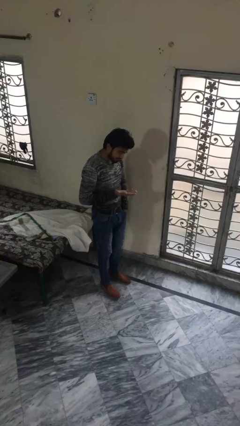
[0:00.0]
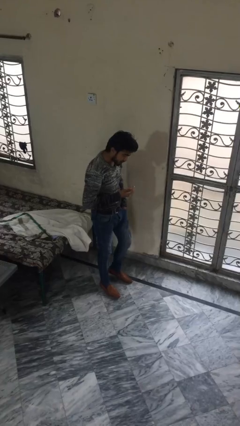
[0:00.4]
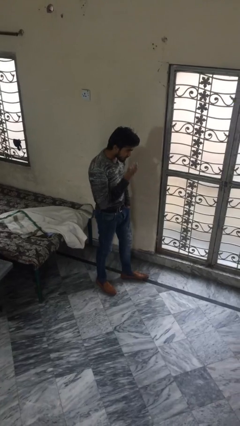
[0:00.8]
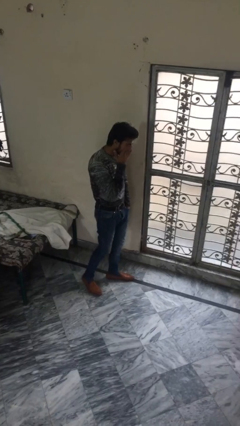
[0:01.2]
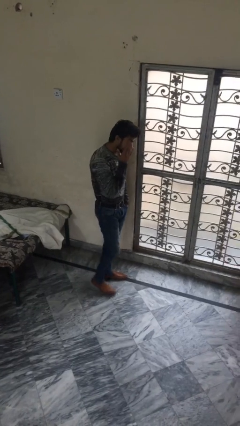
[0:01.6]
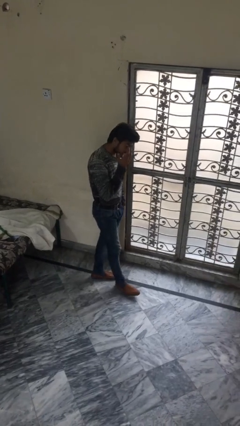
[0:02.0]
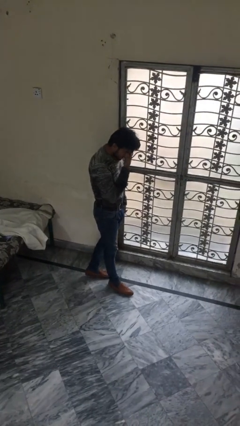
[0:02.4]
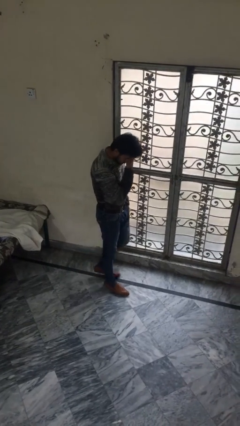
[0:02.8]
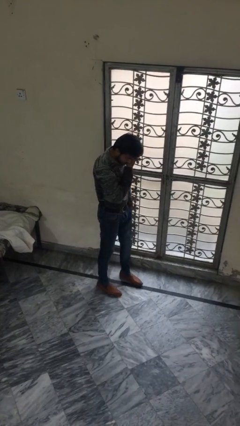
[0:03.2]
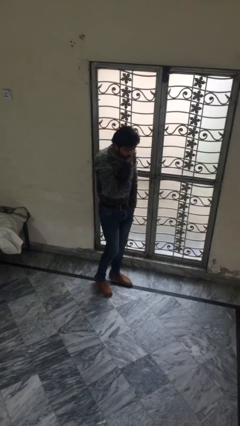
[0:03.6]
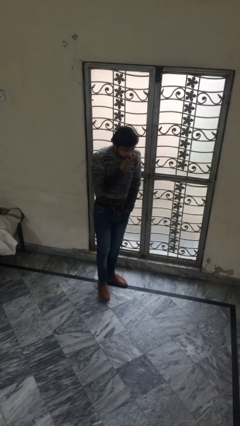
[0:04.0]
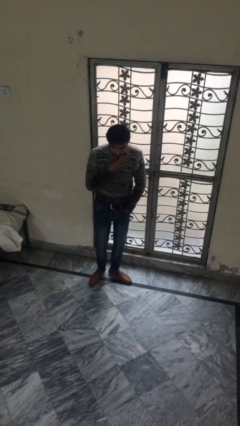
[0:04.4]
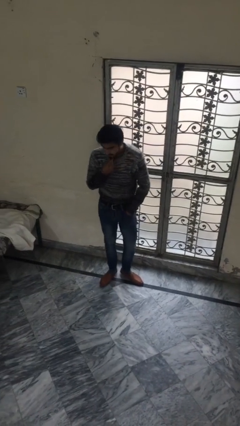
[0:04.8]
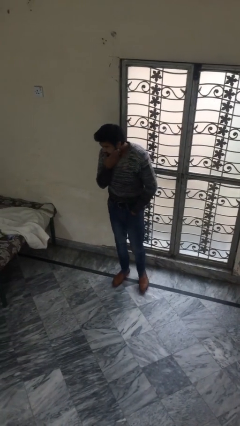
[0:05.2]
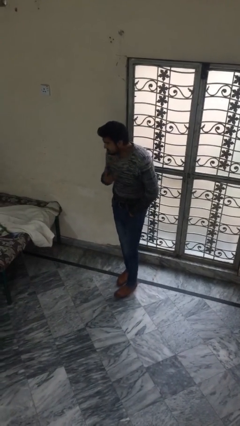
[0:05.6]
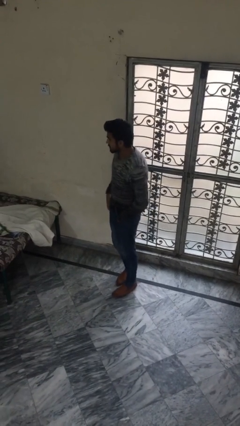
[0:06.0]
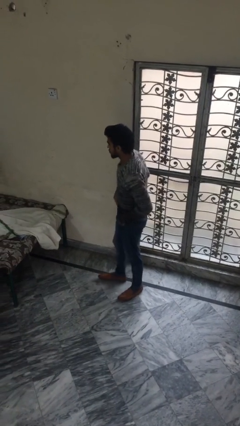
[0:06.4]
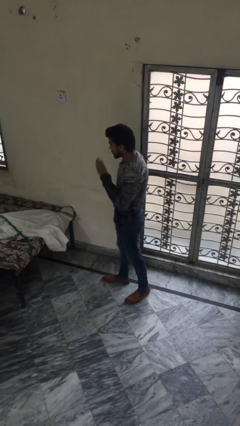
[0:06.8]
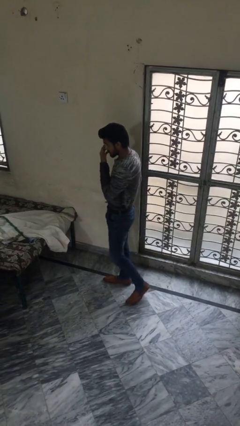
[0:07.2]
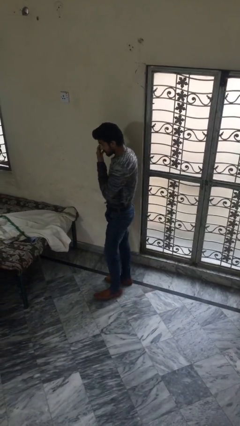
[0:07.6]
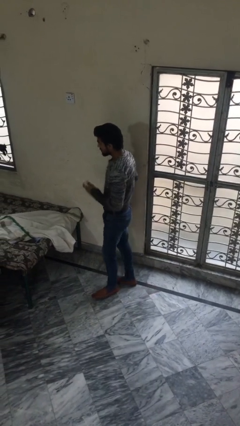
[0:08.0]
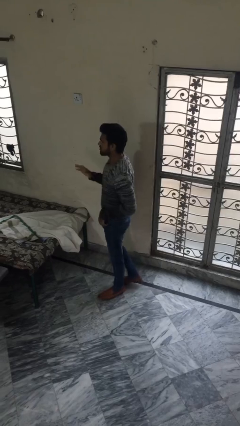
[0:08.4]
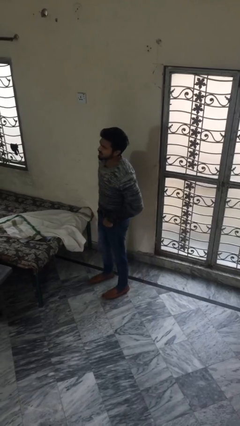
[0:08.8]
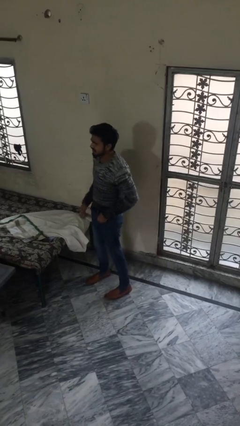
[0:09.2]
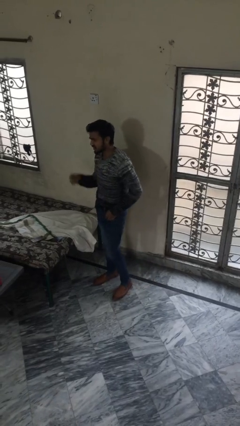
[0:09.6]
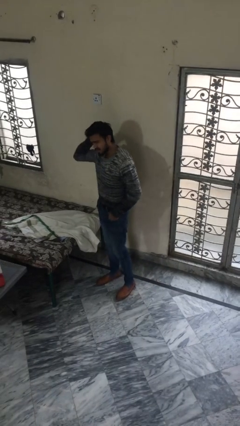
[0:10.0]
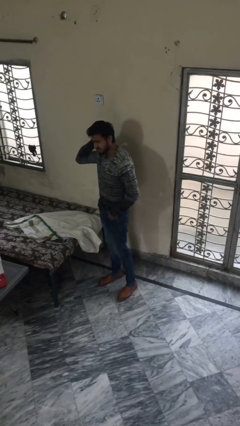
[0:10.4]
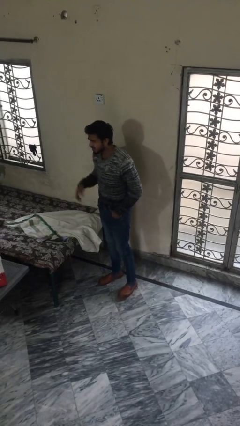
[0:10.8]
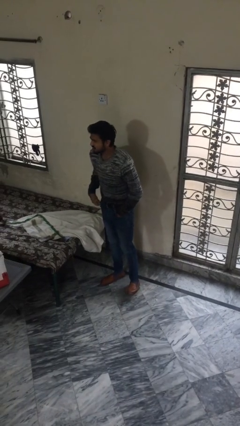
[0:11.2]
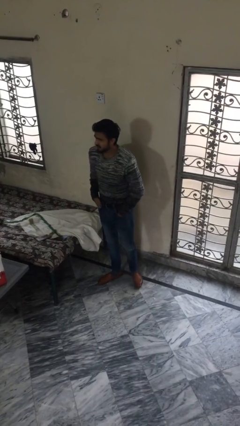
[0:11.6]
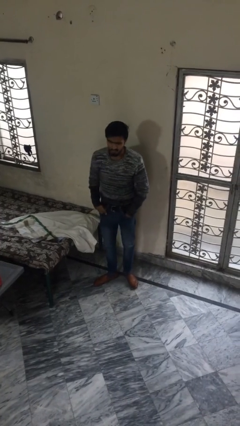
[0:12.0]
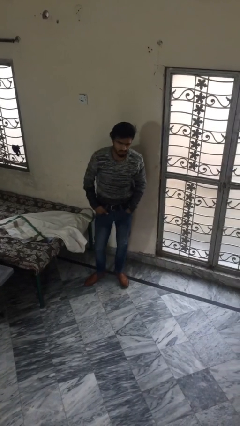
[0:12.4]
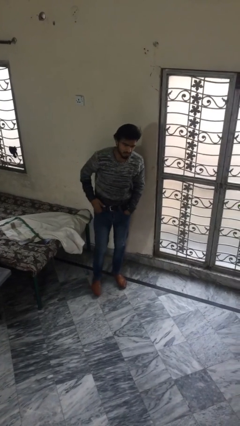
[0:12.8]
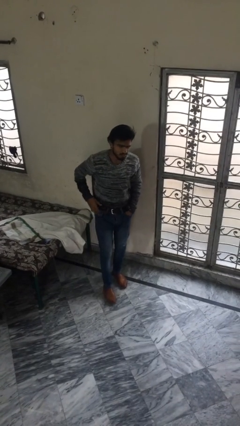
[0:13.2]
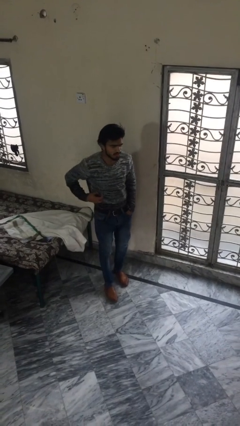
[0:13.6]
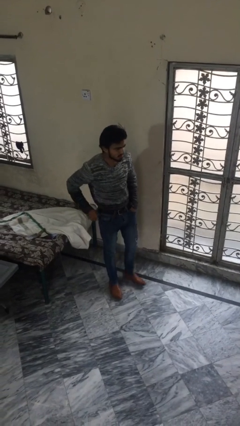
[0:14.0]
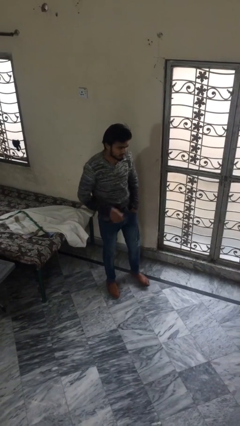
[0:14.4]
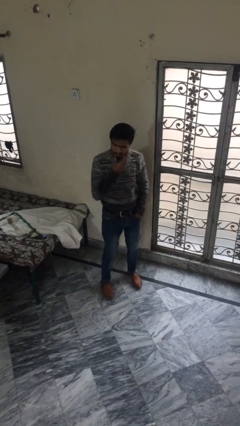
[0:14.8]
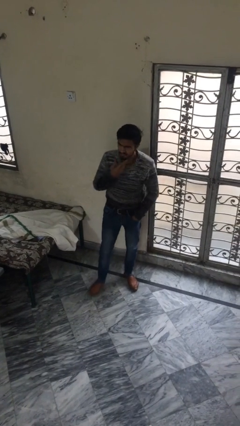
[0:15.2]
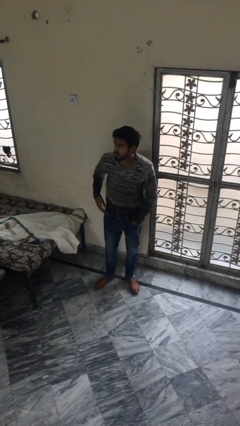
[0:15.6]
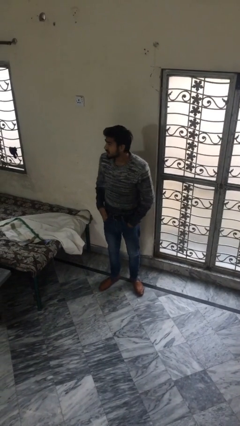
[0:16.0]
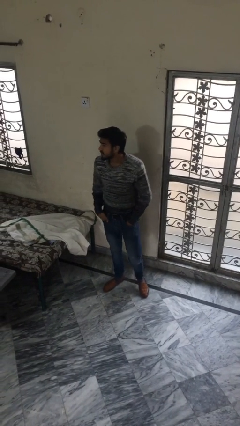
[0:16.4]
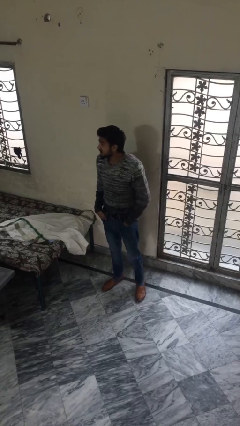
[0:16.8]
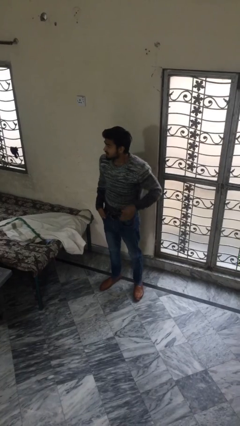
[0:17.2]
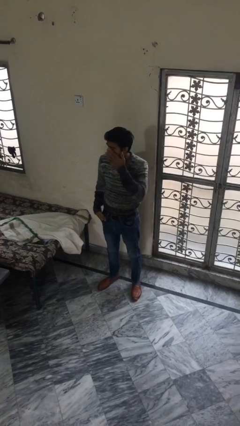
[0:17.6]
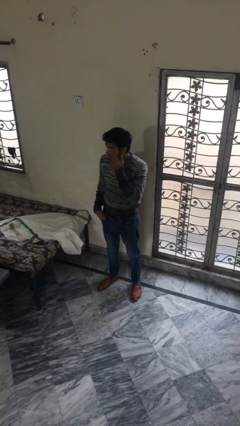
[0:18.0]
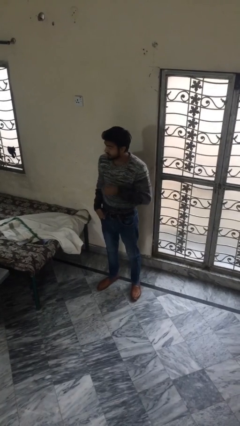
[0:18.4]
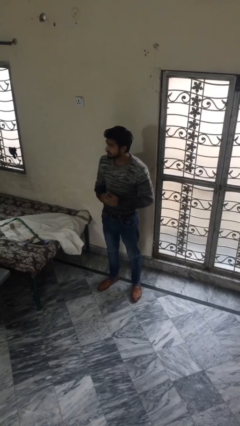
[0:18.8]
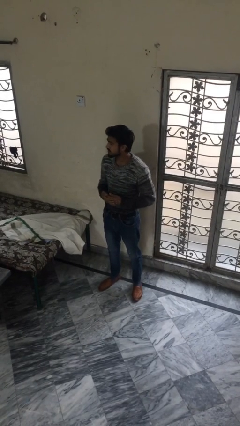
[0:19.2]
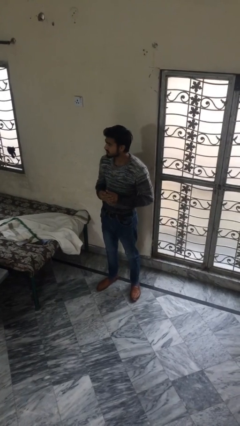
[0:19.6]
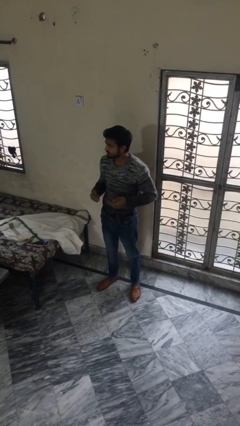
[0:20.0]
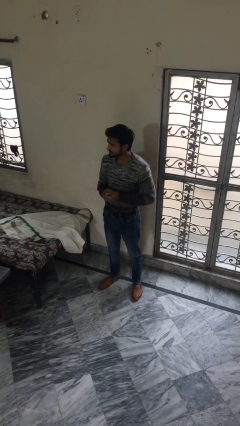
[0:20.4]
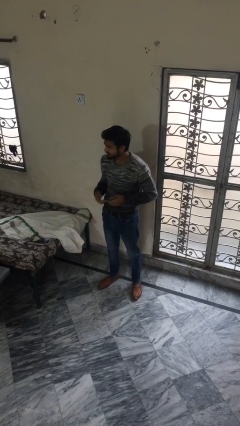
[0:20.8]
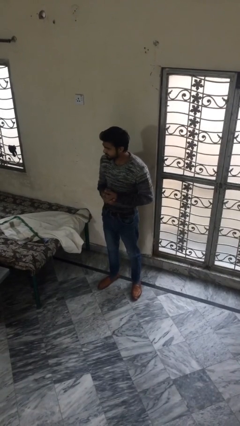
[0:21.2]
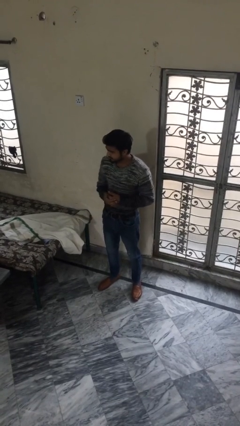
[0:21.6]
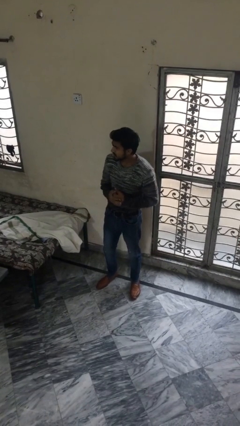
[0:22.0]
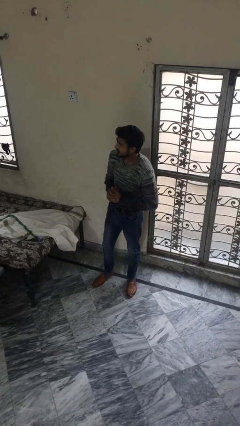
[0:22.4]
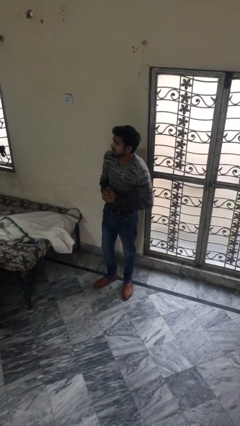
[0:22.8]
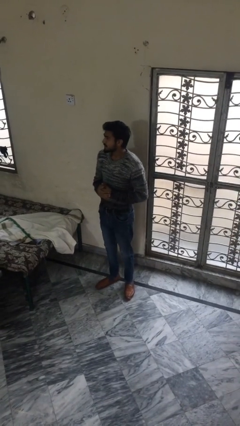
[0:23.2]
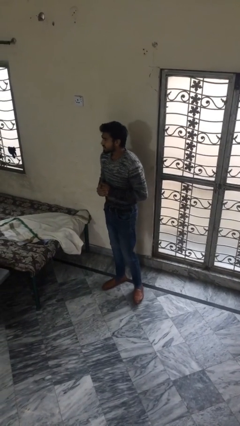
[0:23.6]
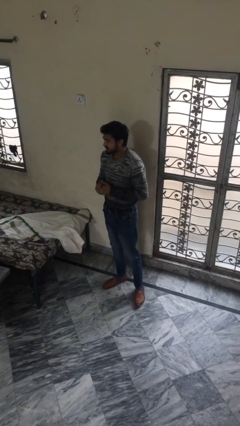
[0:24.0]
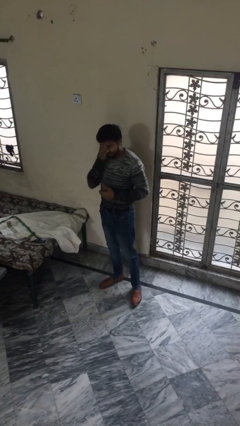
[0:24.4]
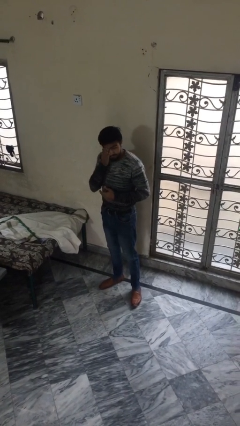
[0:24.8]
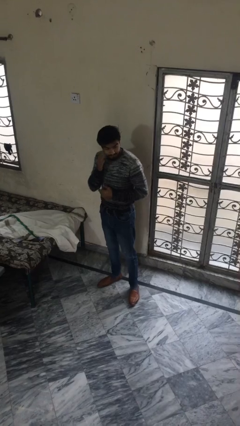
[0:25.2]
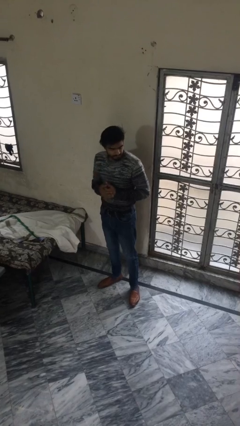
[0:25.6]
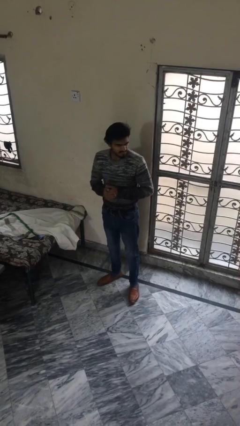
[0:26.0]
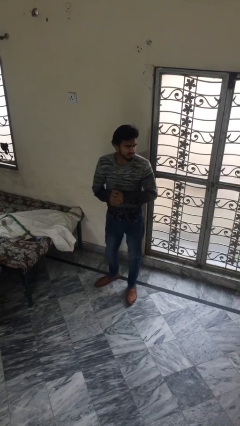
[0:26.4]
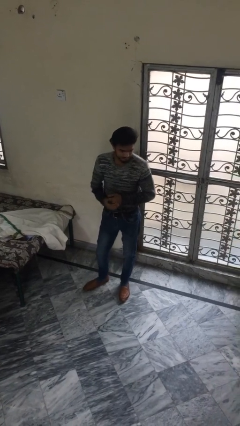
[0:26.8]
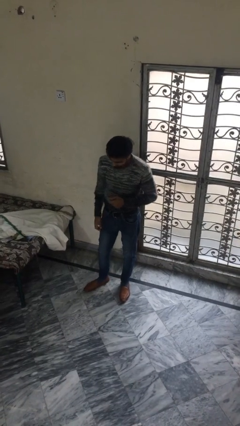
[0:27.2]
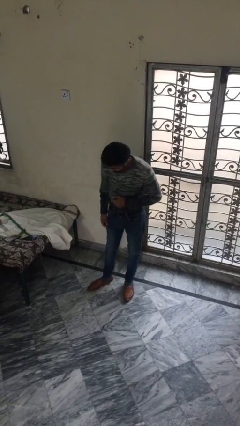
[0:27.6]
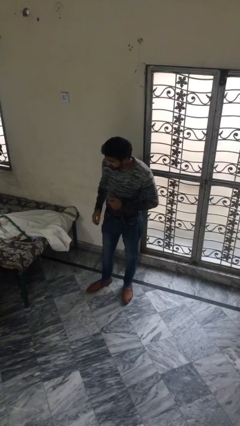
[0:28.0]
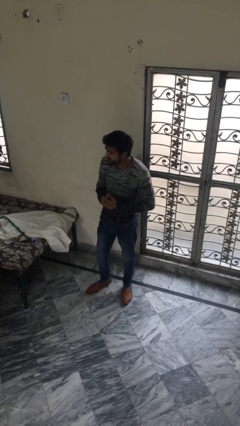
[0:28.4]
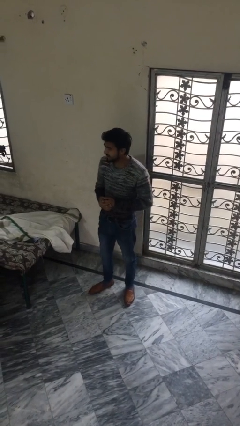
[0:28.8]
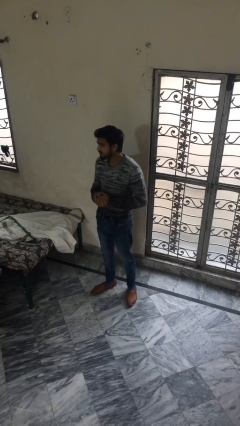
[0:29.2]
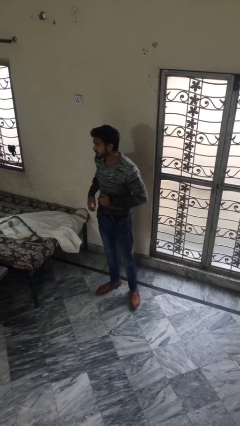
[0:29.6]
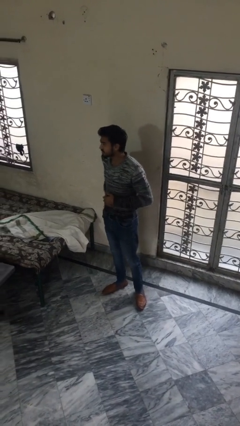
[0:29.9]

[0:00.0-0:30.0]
person walks

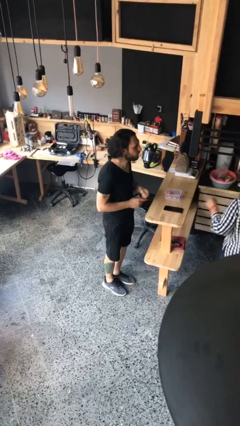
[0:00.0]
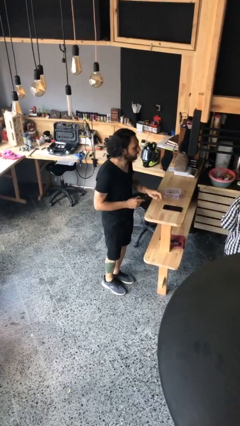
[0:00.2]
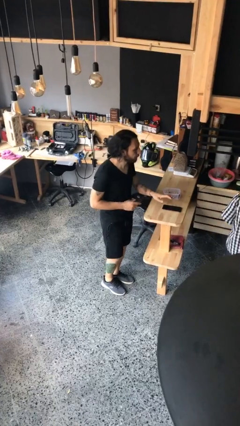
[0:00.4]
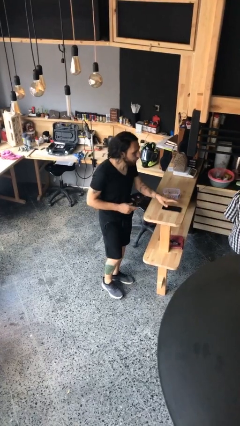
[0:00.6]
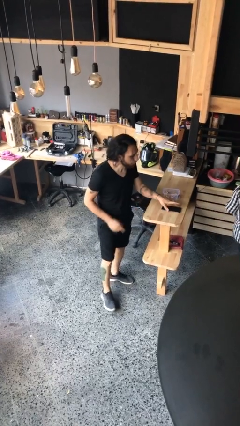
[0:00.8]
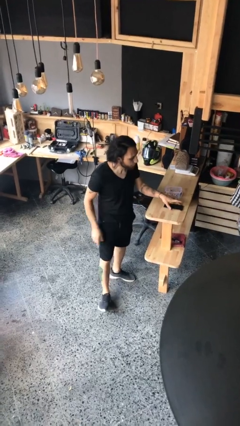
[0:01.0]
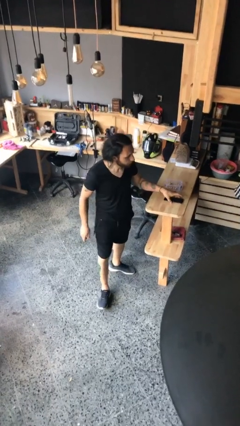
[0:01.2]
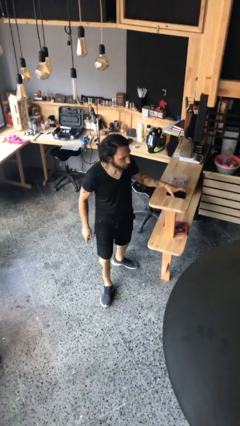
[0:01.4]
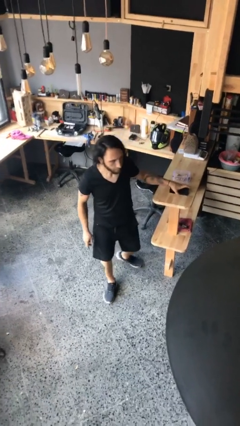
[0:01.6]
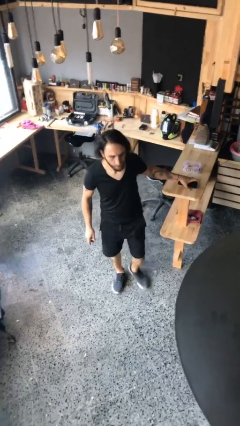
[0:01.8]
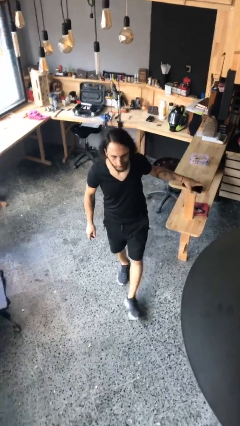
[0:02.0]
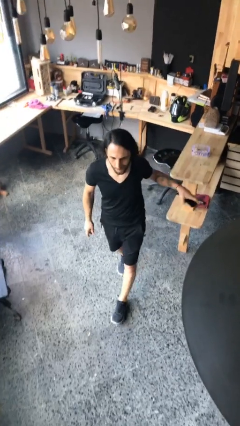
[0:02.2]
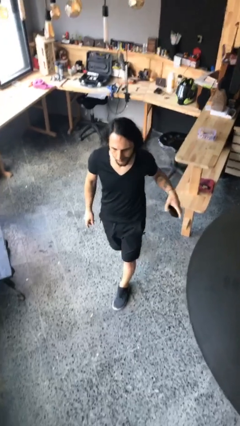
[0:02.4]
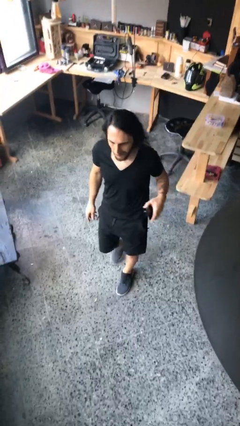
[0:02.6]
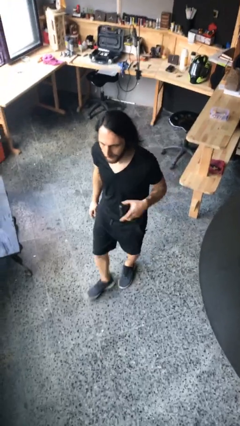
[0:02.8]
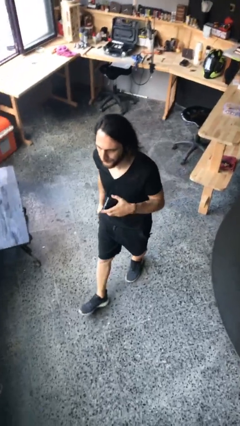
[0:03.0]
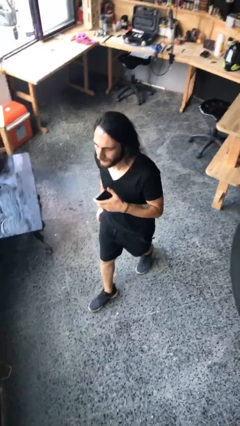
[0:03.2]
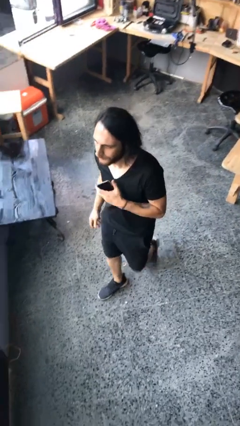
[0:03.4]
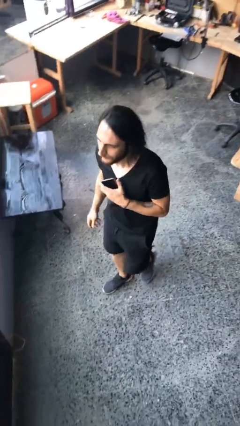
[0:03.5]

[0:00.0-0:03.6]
person steals object from person
